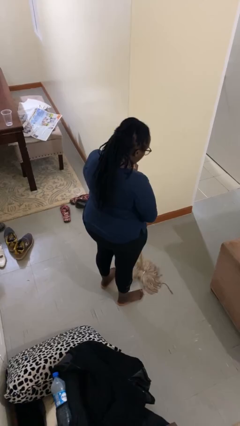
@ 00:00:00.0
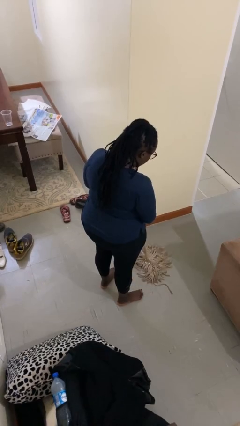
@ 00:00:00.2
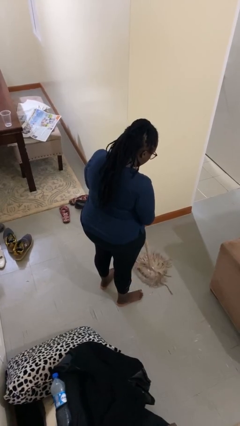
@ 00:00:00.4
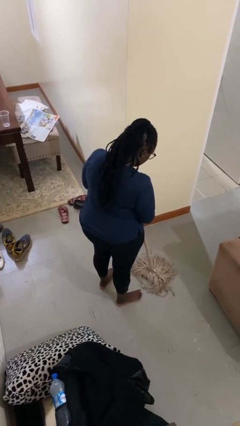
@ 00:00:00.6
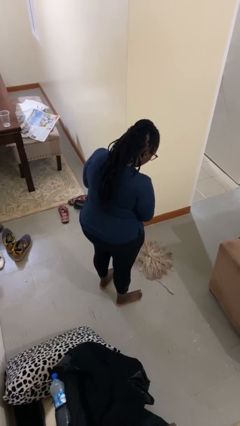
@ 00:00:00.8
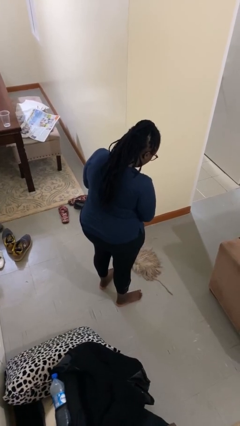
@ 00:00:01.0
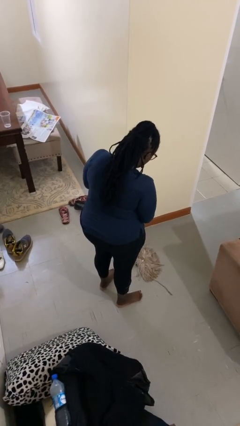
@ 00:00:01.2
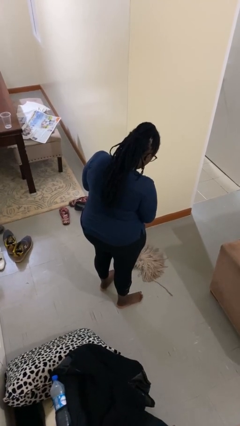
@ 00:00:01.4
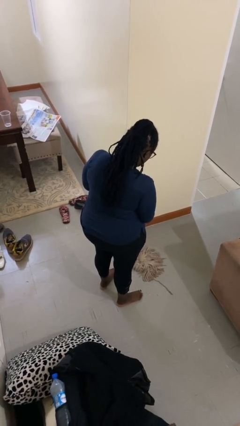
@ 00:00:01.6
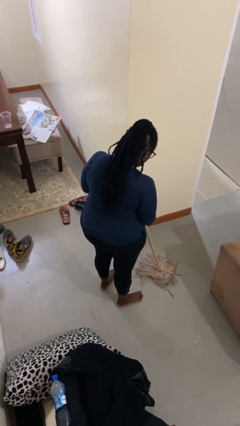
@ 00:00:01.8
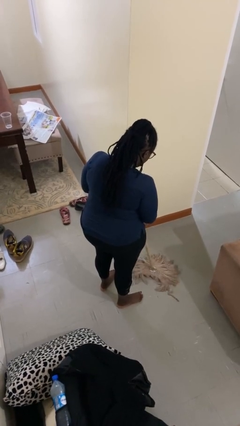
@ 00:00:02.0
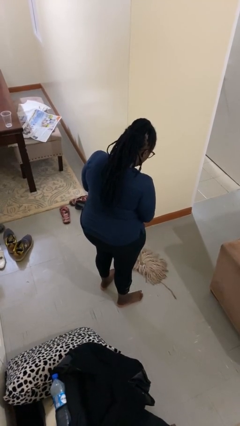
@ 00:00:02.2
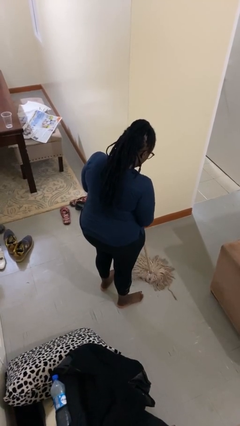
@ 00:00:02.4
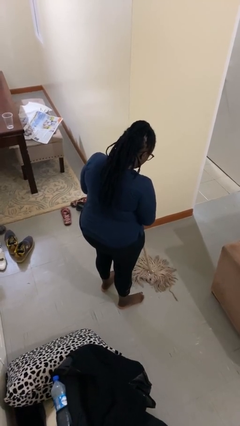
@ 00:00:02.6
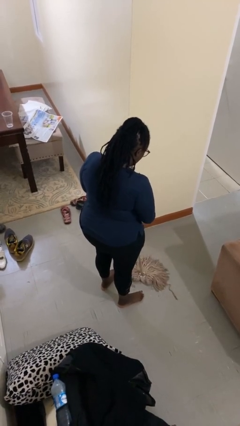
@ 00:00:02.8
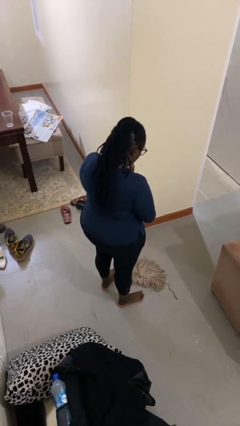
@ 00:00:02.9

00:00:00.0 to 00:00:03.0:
person mops

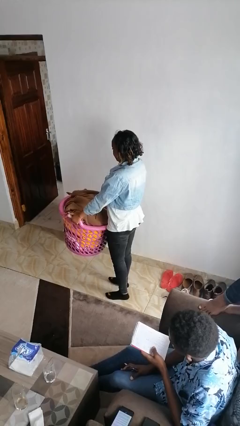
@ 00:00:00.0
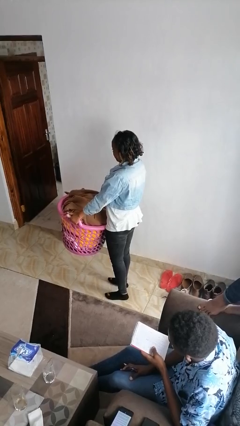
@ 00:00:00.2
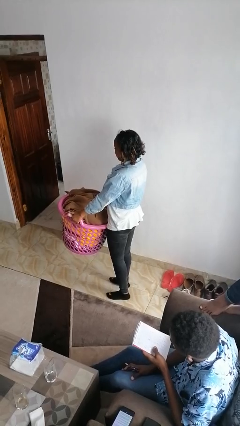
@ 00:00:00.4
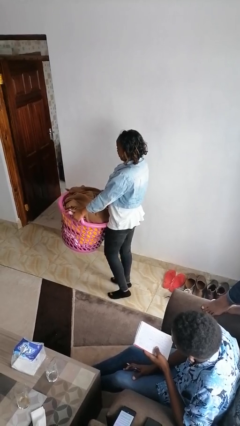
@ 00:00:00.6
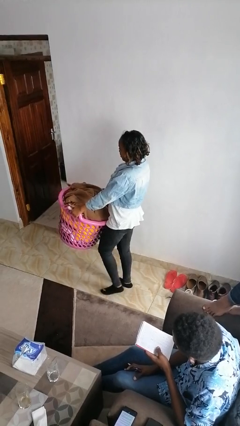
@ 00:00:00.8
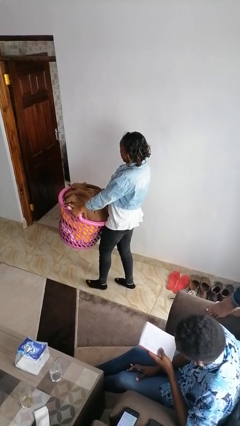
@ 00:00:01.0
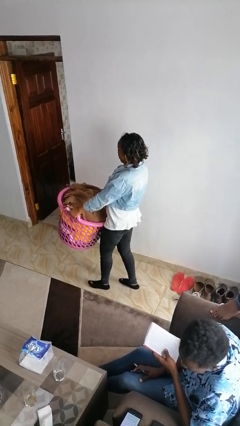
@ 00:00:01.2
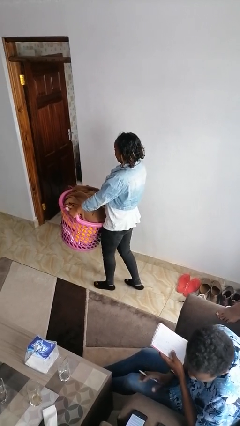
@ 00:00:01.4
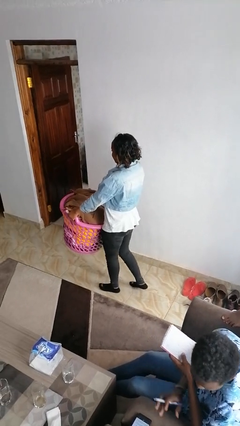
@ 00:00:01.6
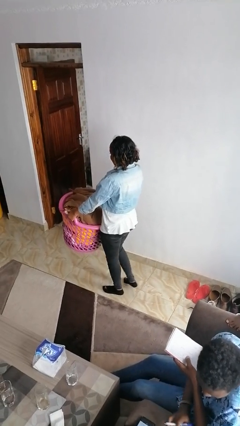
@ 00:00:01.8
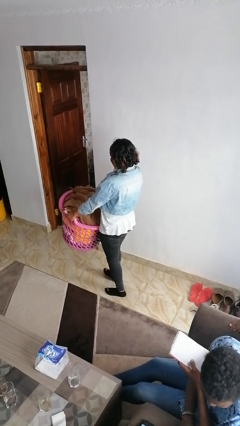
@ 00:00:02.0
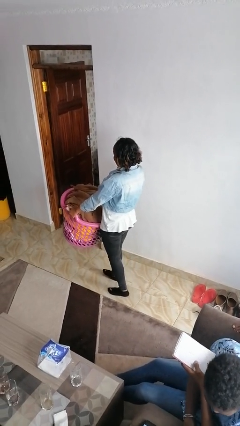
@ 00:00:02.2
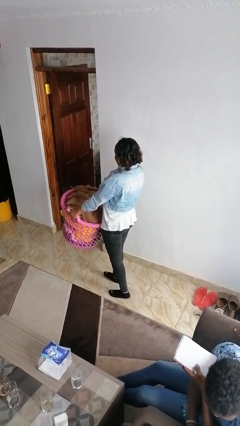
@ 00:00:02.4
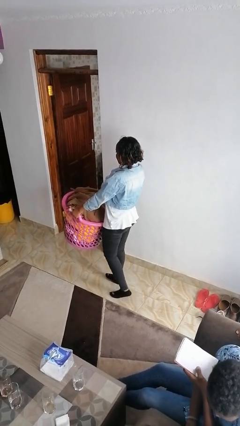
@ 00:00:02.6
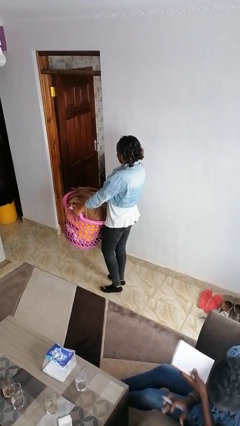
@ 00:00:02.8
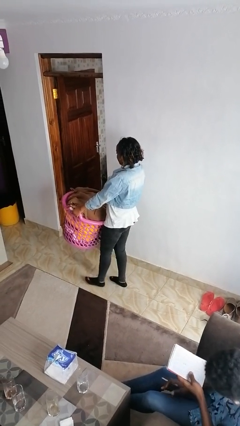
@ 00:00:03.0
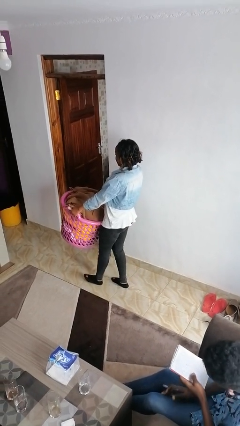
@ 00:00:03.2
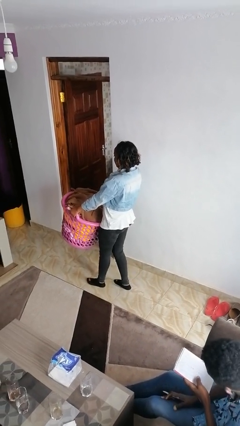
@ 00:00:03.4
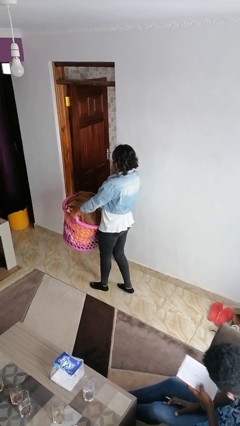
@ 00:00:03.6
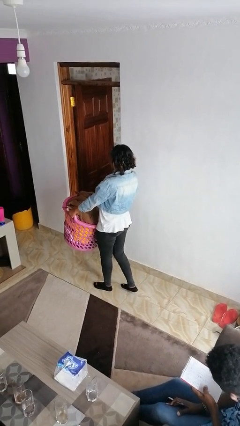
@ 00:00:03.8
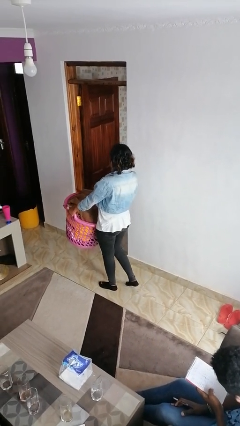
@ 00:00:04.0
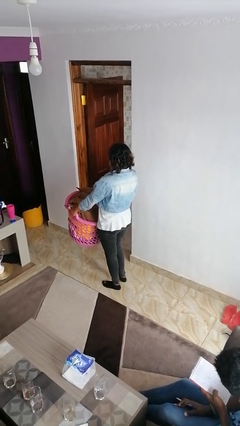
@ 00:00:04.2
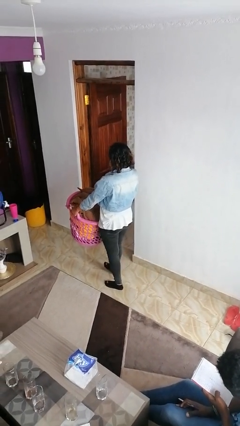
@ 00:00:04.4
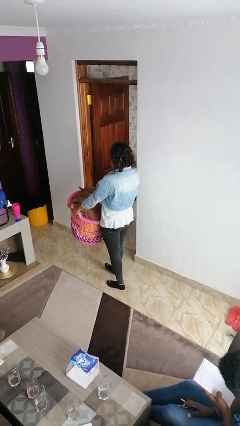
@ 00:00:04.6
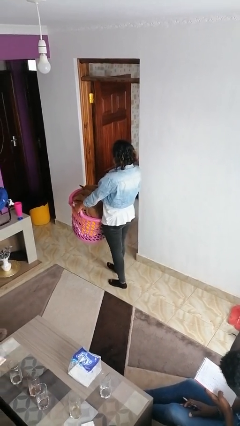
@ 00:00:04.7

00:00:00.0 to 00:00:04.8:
person carries laundry basket

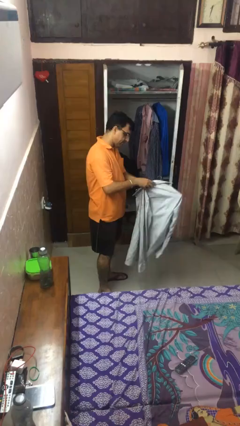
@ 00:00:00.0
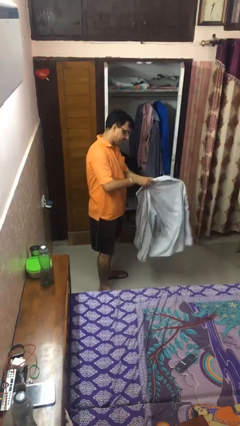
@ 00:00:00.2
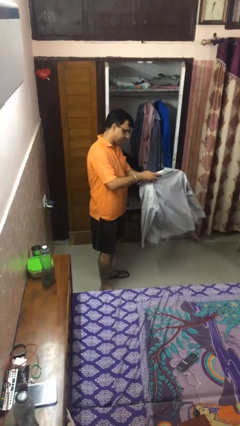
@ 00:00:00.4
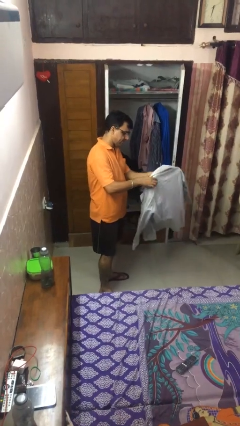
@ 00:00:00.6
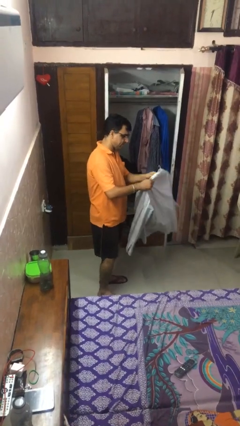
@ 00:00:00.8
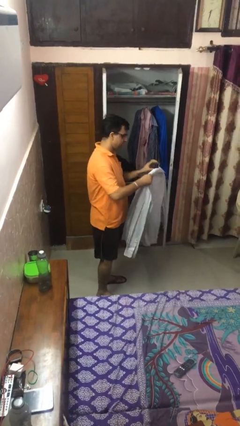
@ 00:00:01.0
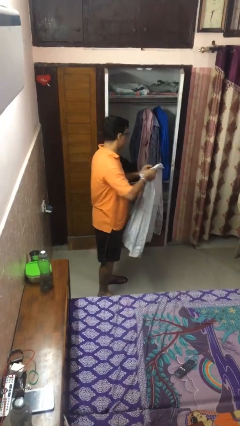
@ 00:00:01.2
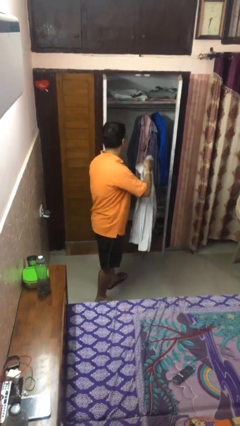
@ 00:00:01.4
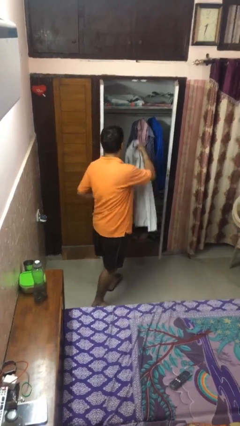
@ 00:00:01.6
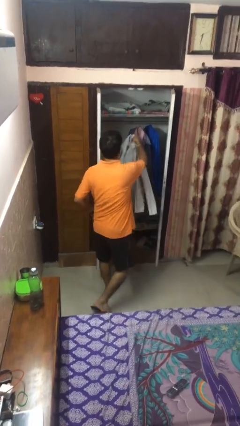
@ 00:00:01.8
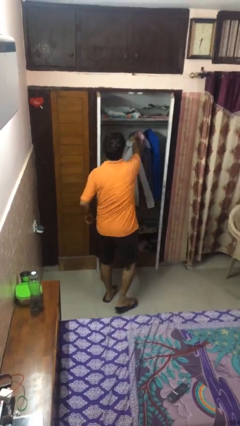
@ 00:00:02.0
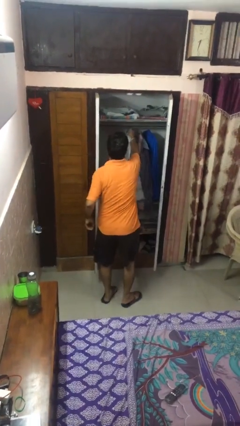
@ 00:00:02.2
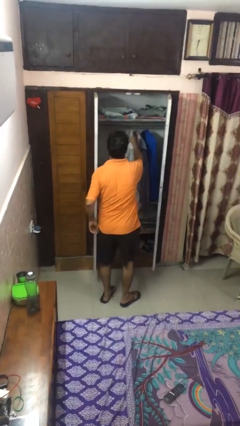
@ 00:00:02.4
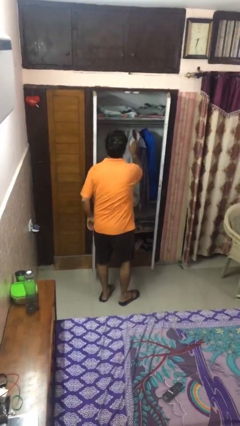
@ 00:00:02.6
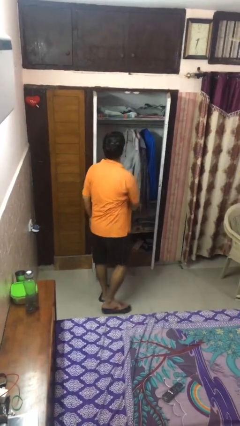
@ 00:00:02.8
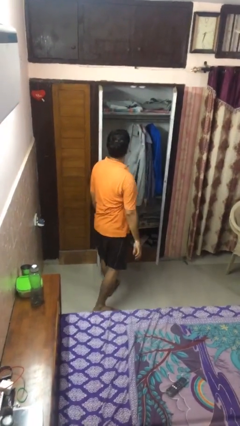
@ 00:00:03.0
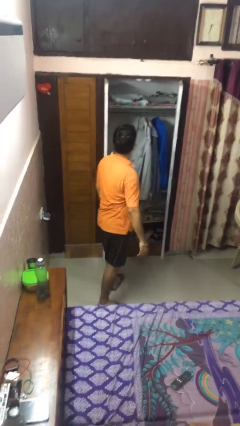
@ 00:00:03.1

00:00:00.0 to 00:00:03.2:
person puts clothes into closet

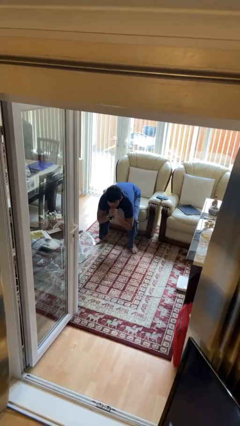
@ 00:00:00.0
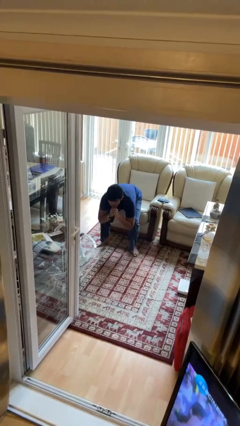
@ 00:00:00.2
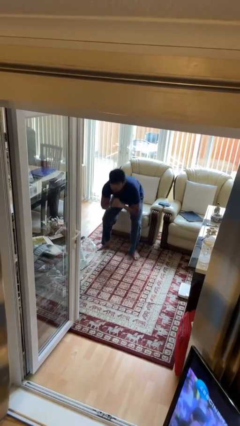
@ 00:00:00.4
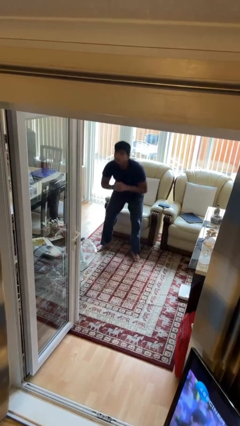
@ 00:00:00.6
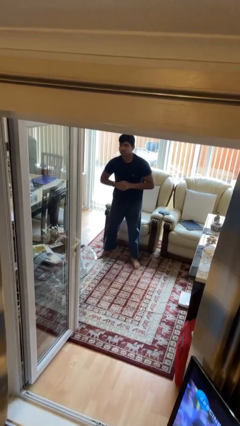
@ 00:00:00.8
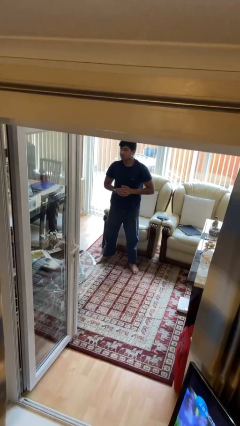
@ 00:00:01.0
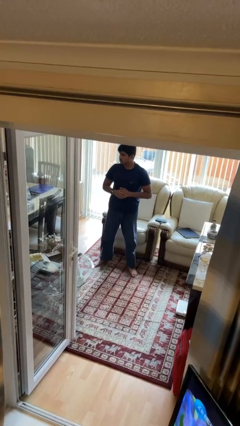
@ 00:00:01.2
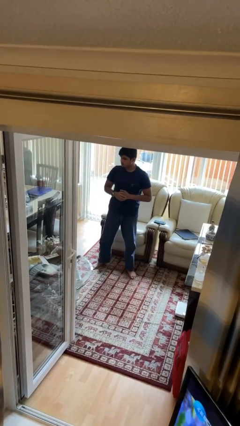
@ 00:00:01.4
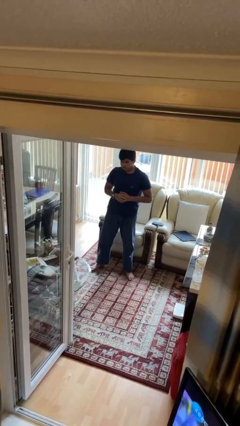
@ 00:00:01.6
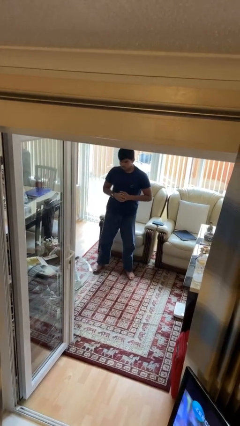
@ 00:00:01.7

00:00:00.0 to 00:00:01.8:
person stands up

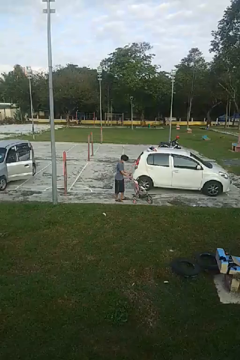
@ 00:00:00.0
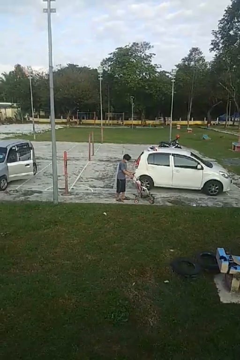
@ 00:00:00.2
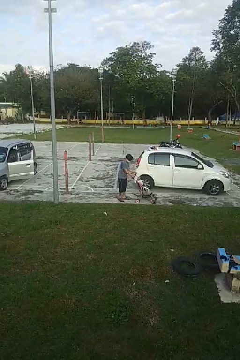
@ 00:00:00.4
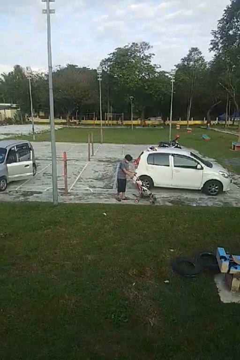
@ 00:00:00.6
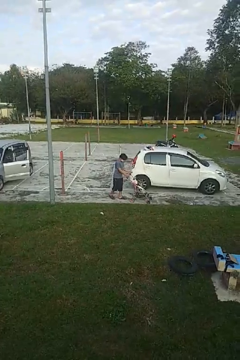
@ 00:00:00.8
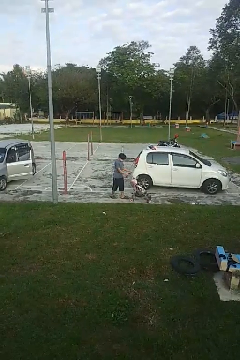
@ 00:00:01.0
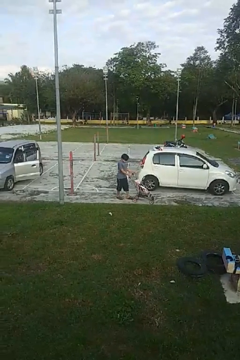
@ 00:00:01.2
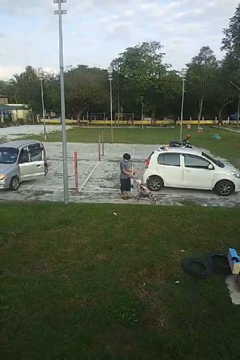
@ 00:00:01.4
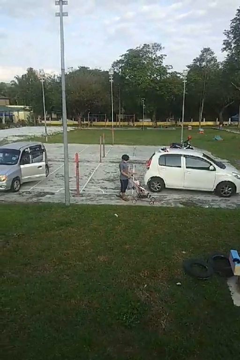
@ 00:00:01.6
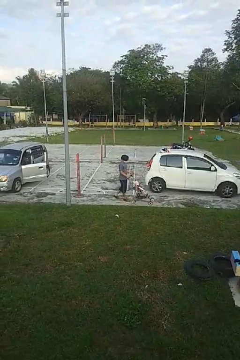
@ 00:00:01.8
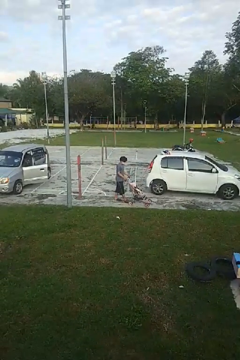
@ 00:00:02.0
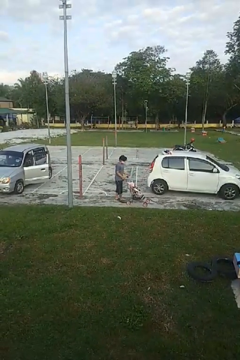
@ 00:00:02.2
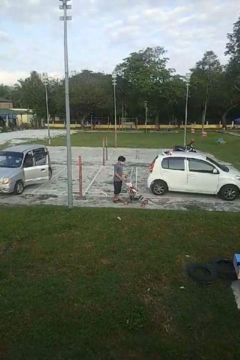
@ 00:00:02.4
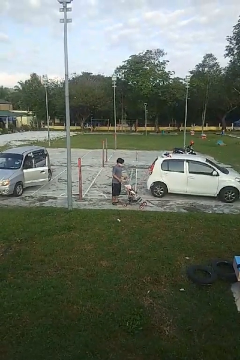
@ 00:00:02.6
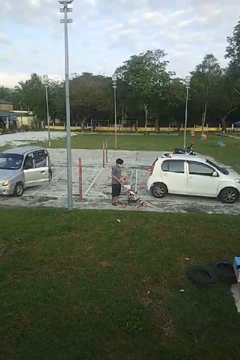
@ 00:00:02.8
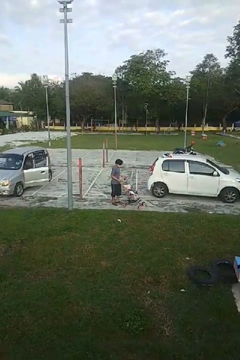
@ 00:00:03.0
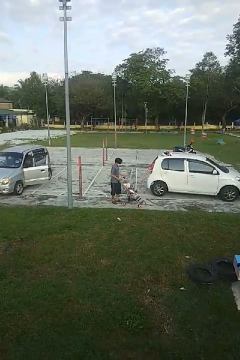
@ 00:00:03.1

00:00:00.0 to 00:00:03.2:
person pulls wheeled cart

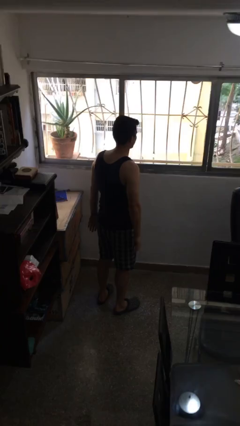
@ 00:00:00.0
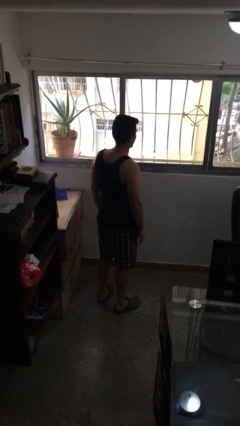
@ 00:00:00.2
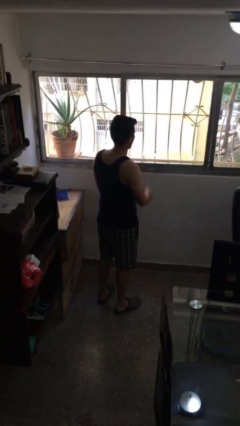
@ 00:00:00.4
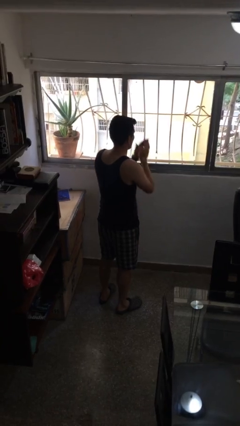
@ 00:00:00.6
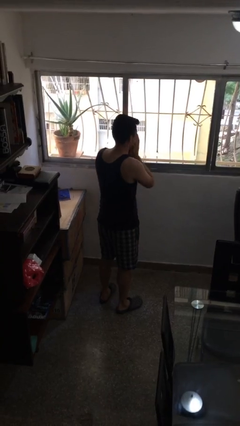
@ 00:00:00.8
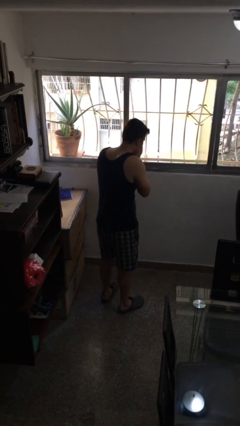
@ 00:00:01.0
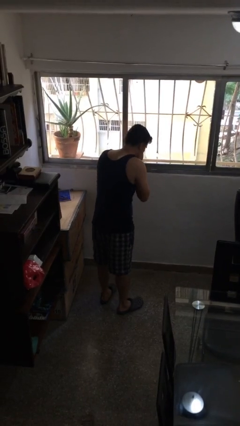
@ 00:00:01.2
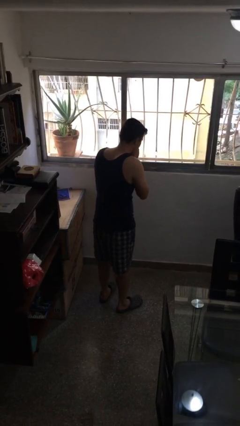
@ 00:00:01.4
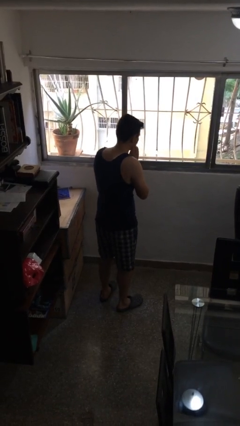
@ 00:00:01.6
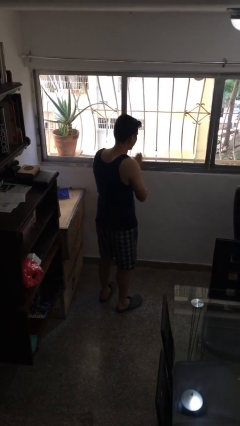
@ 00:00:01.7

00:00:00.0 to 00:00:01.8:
person sneezes into hand
